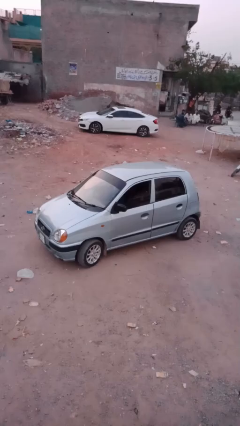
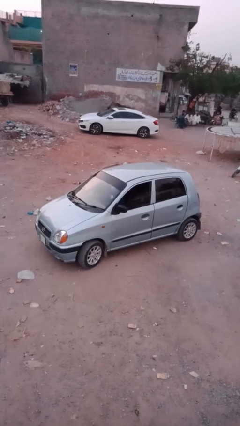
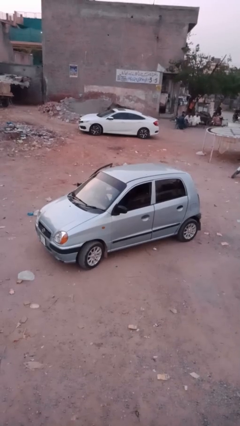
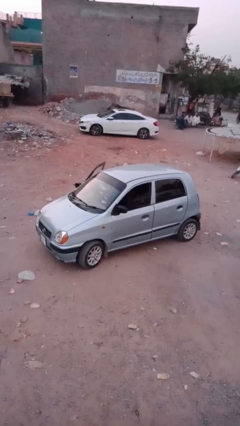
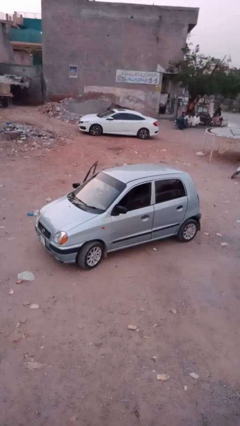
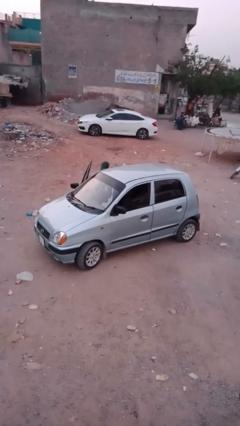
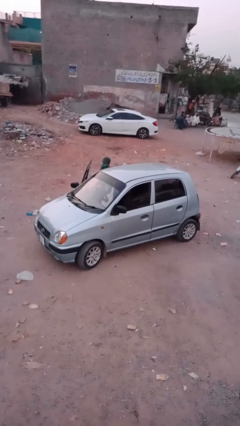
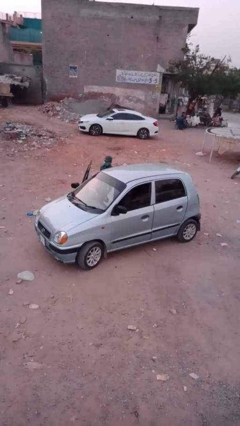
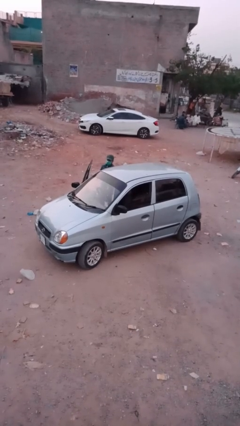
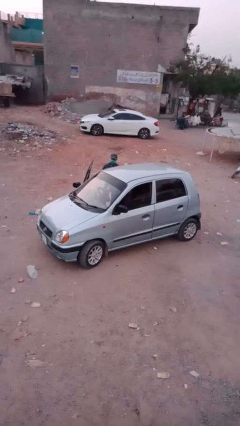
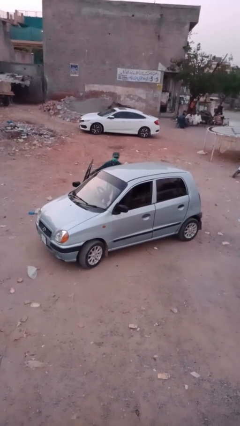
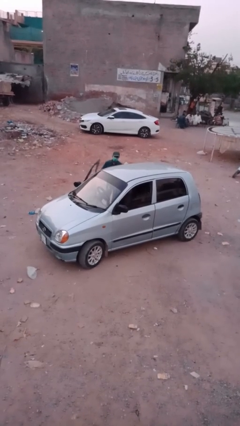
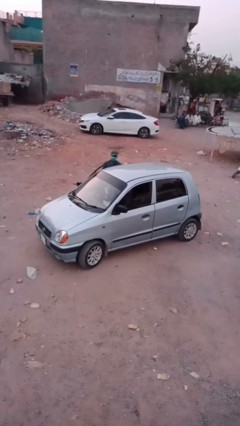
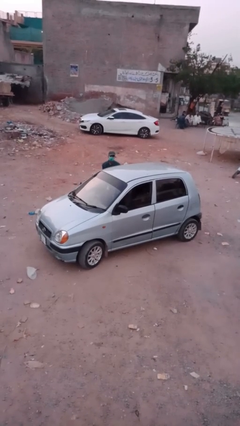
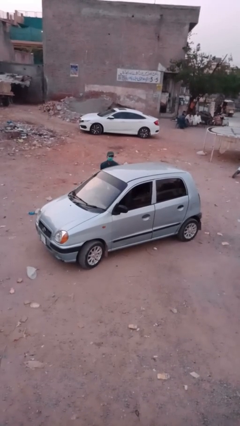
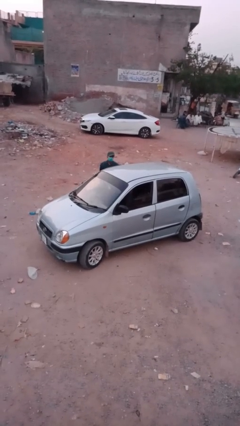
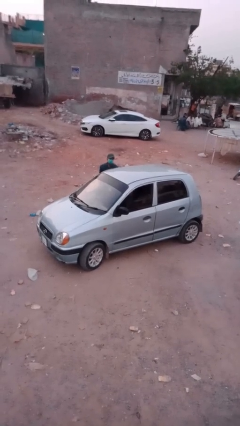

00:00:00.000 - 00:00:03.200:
car drops off person

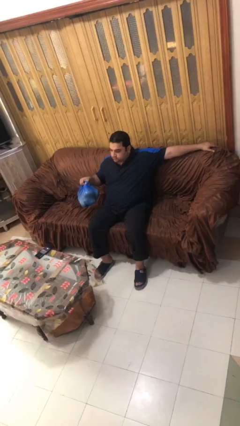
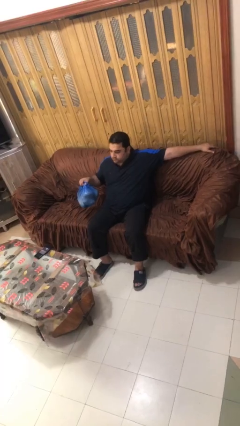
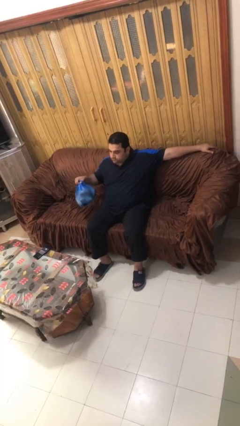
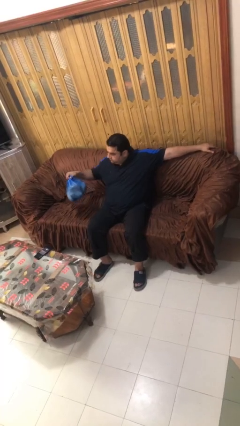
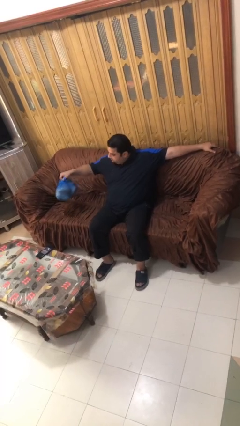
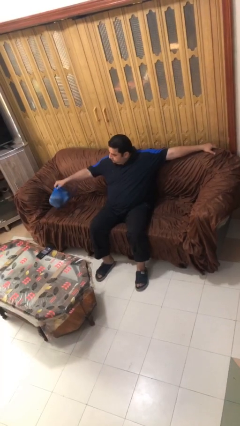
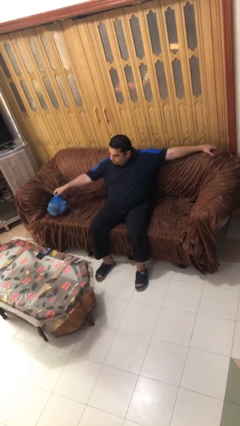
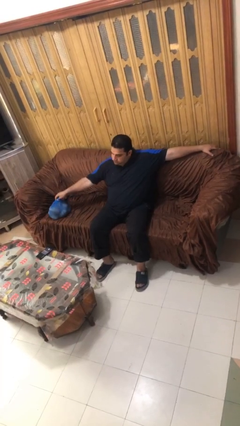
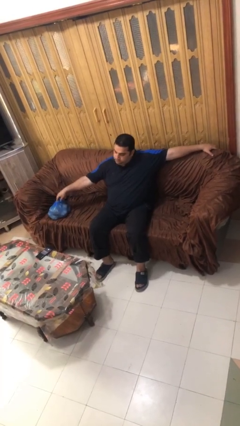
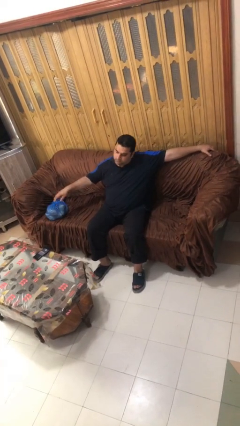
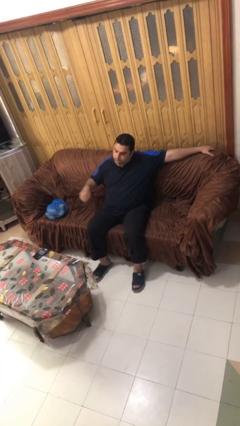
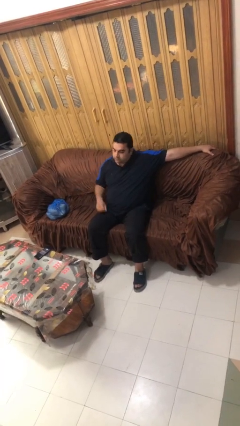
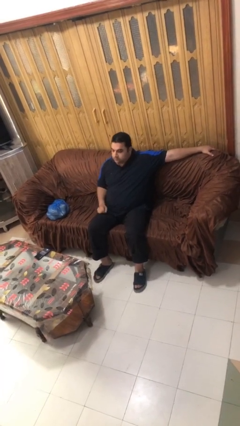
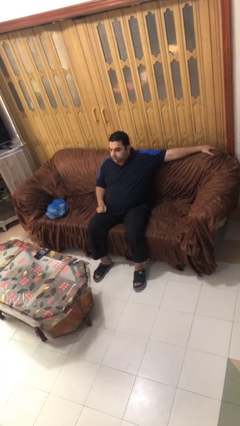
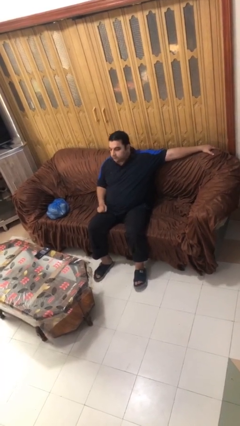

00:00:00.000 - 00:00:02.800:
person puts down object on couch

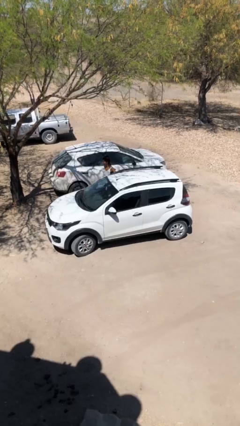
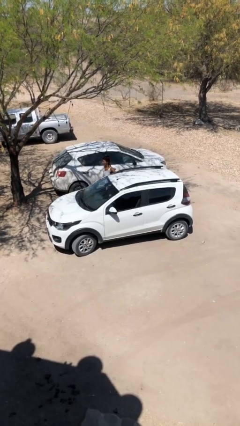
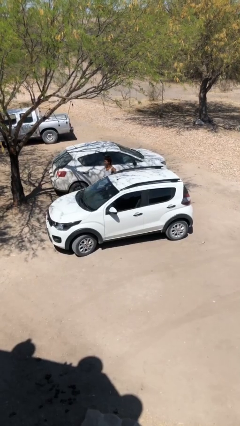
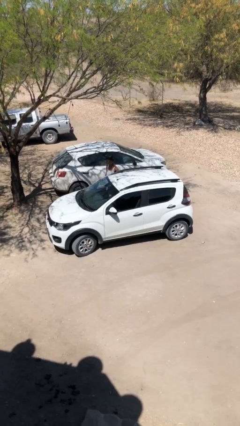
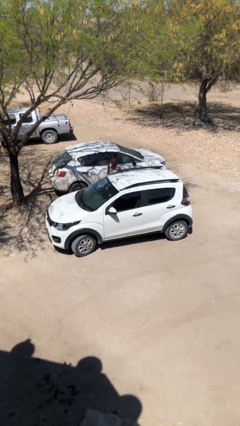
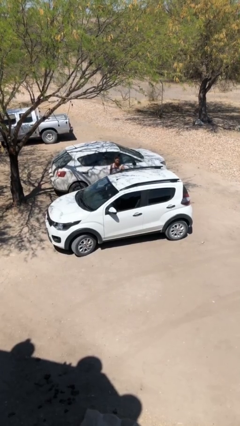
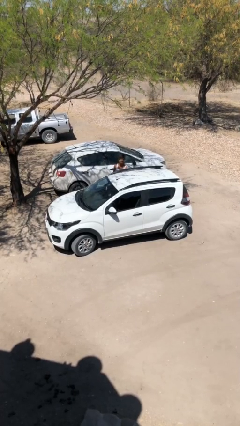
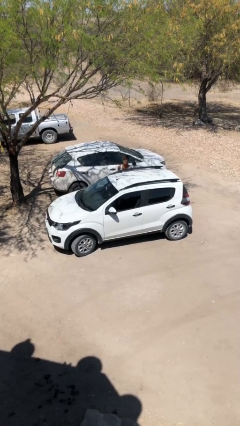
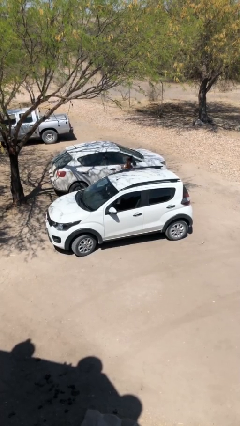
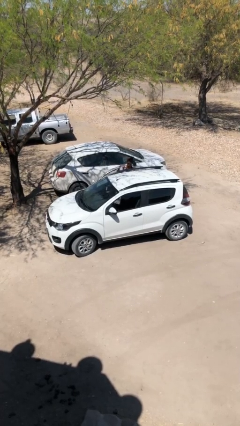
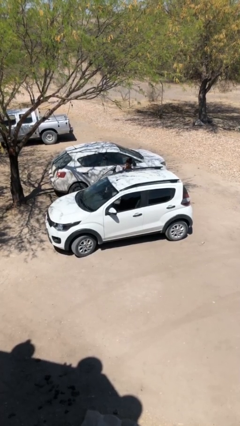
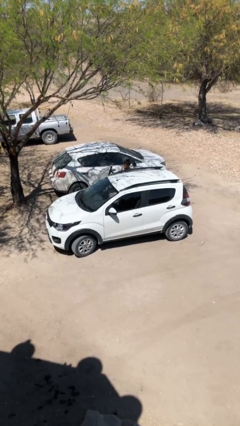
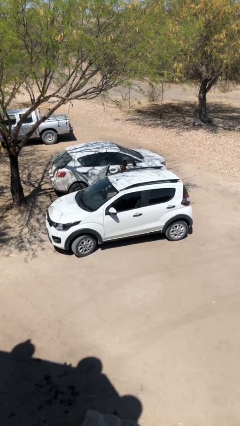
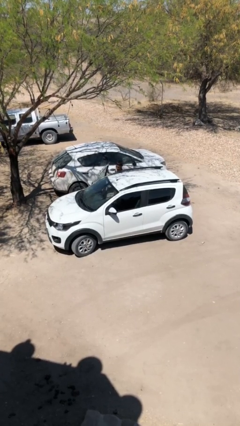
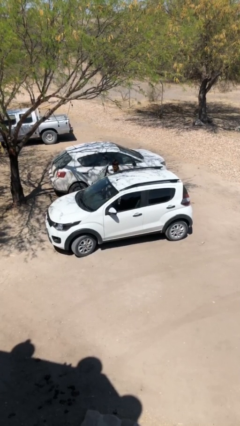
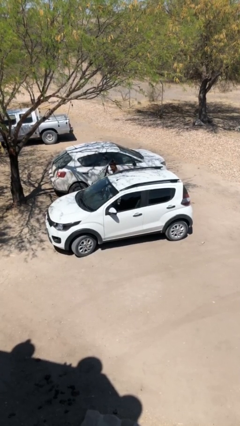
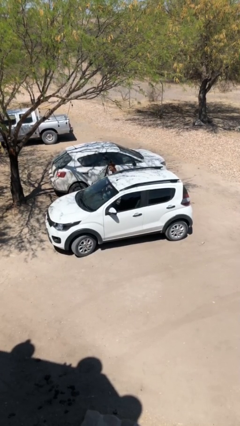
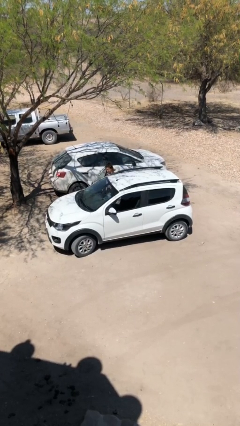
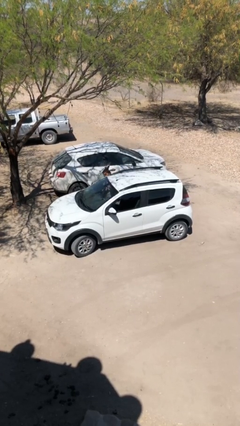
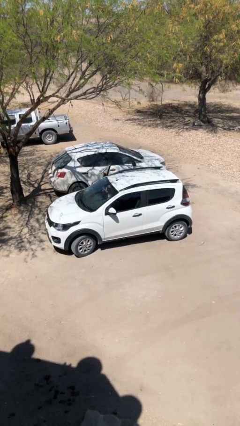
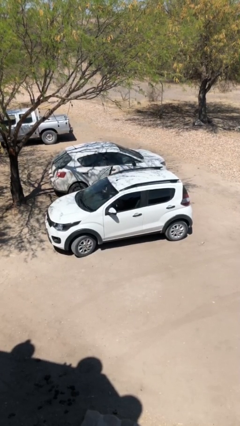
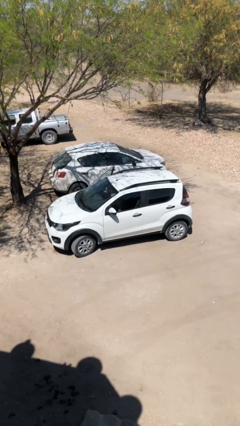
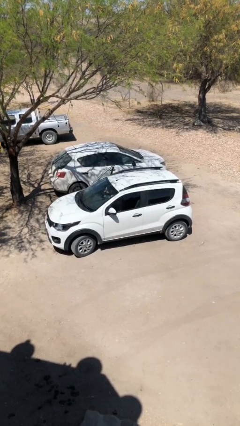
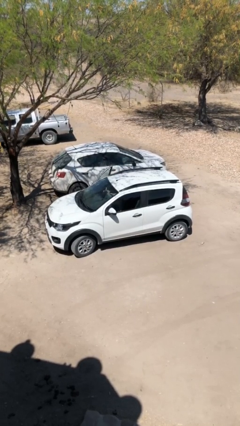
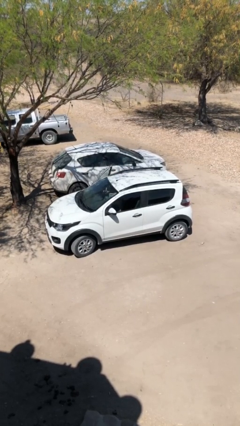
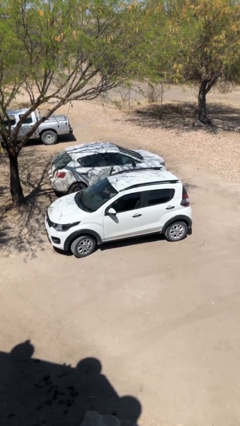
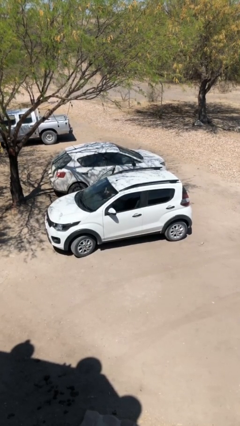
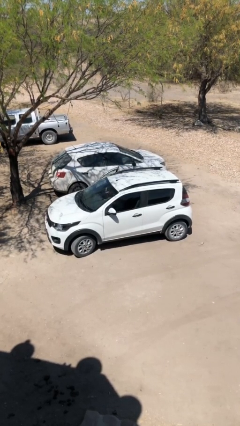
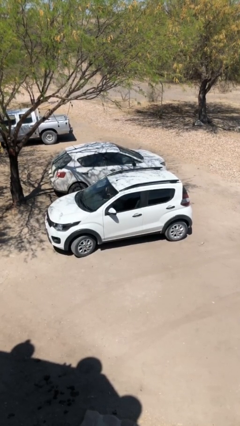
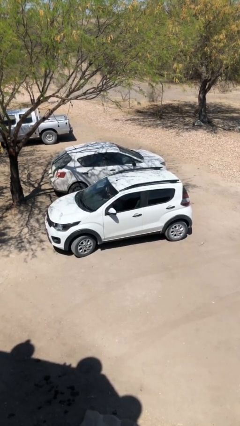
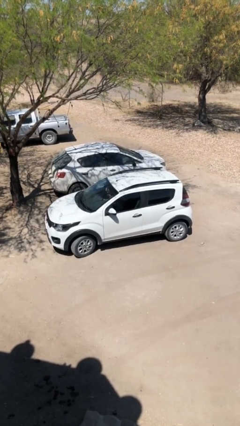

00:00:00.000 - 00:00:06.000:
car picks up person

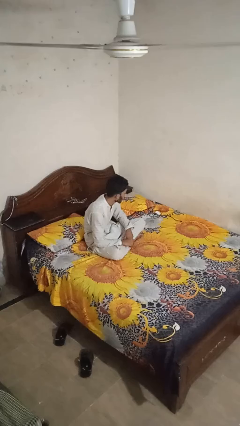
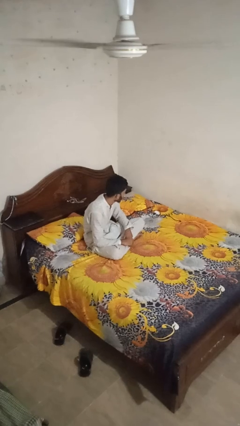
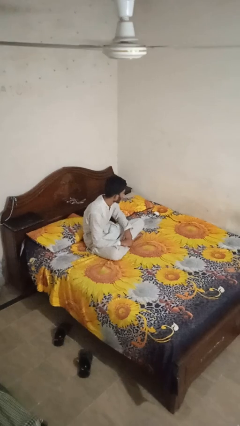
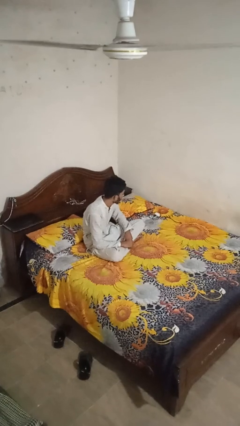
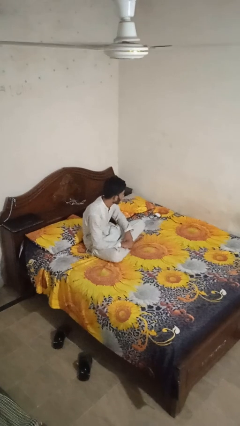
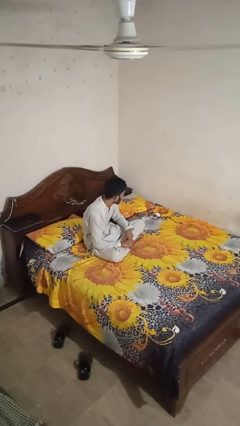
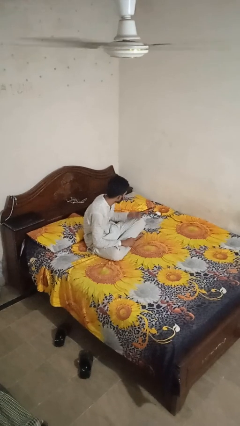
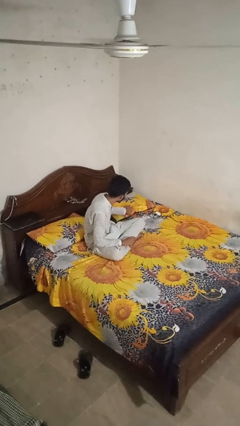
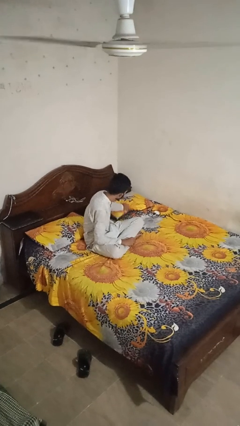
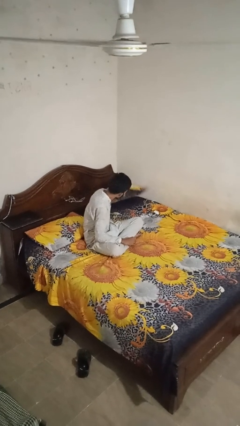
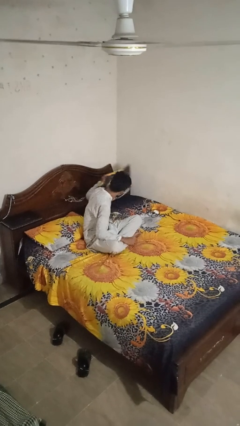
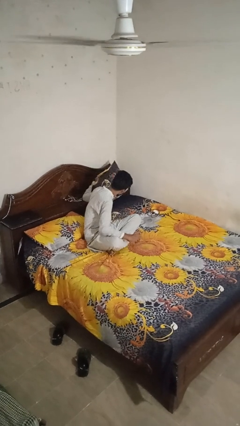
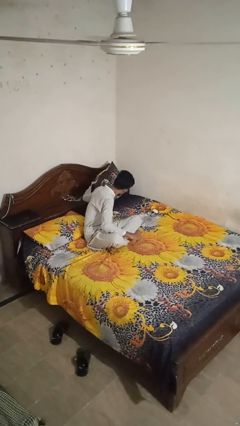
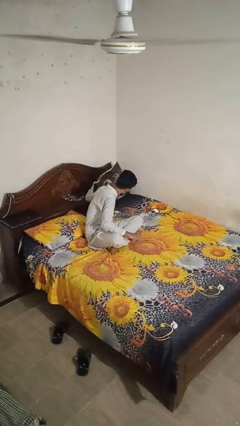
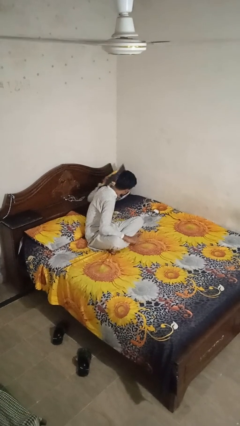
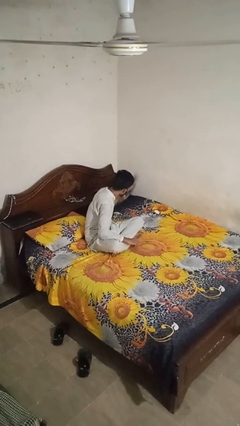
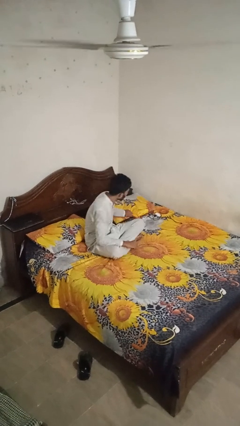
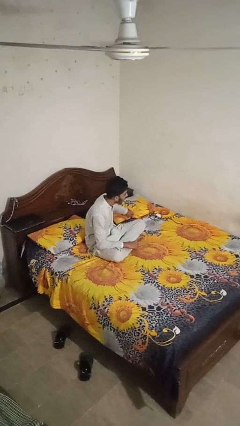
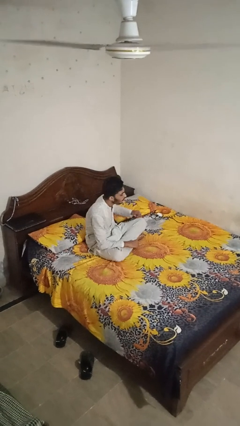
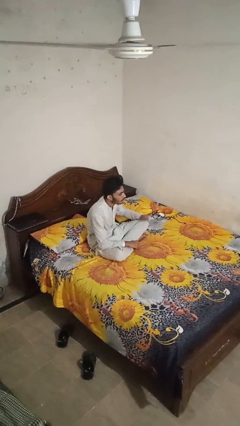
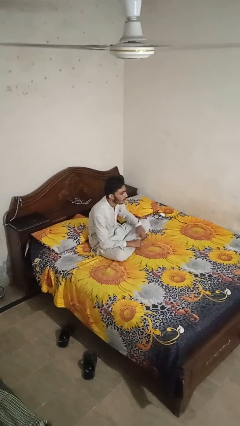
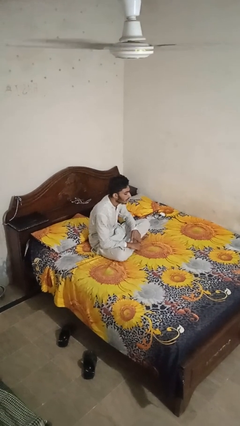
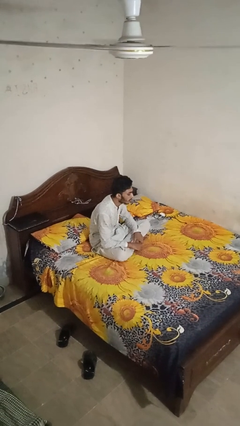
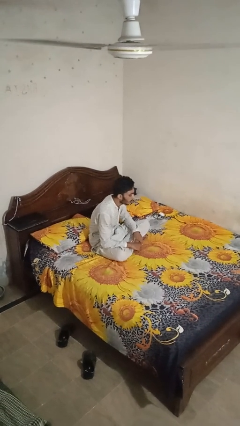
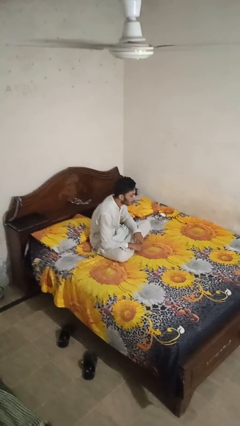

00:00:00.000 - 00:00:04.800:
person searches under bed

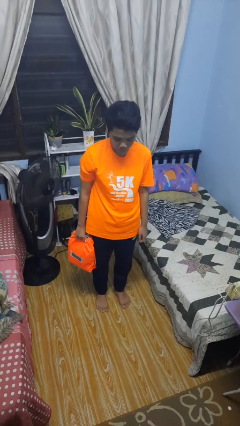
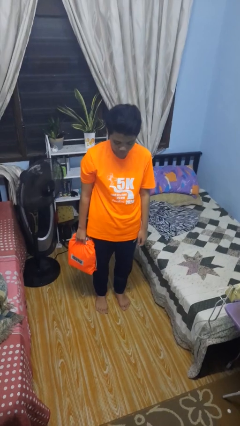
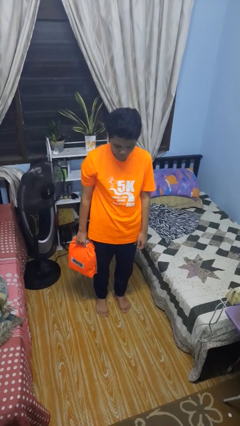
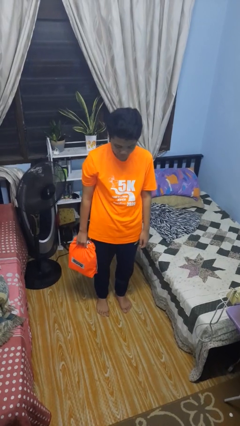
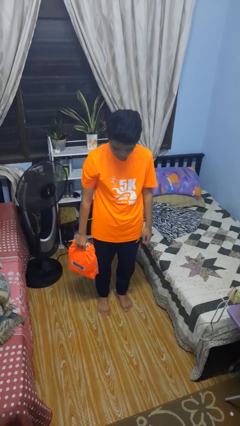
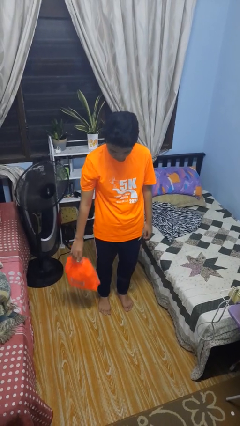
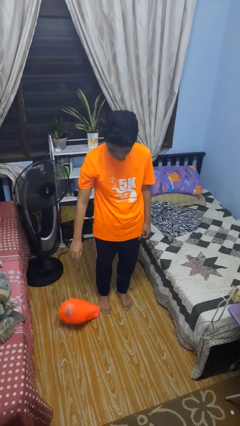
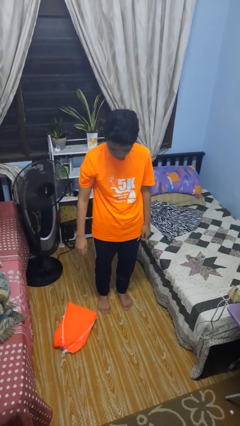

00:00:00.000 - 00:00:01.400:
person drops object
